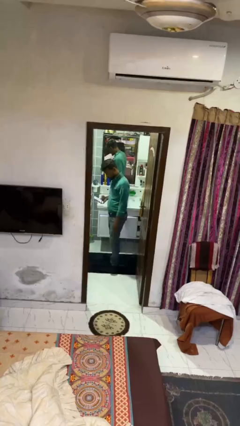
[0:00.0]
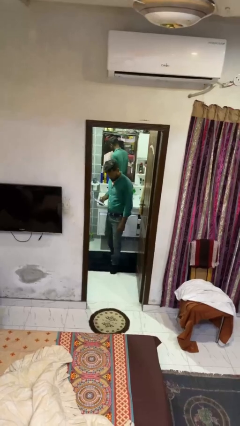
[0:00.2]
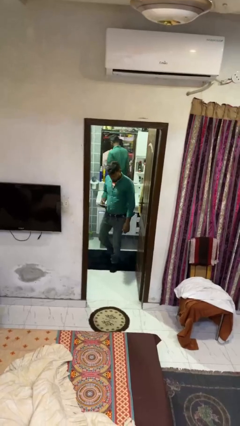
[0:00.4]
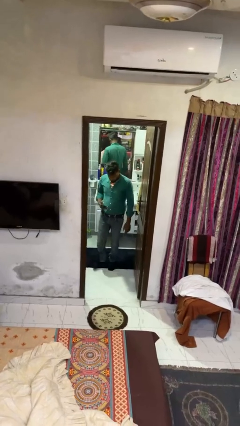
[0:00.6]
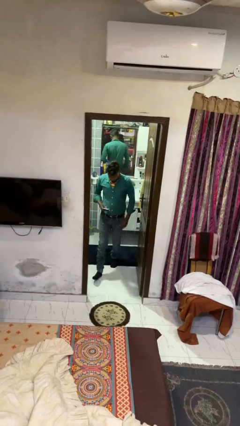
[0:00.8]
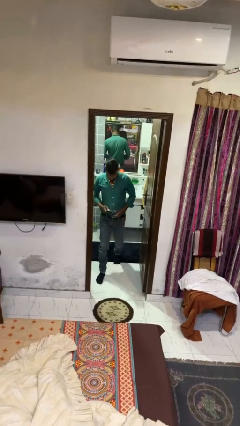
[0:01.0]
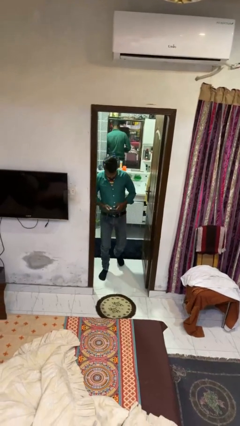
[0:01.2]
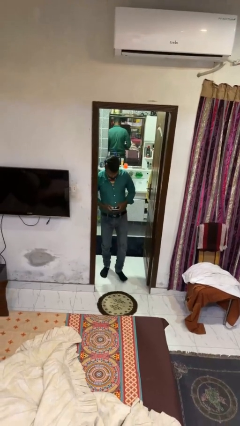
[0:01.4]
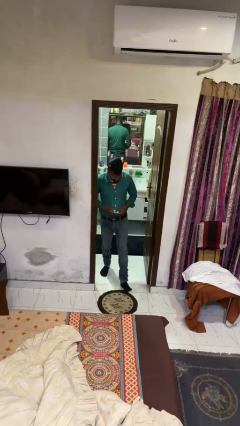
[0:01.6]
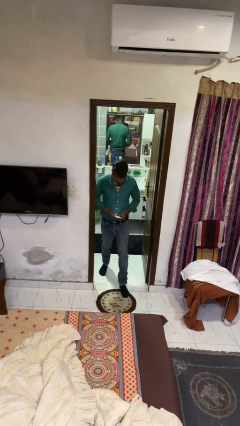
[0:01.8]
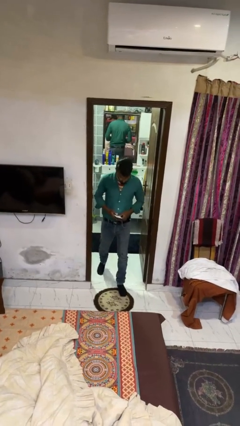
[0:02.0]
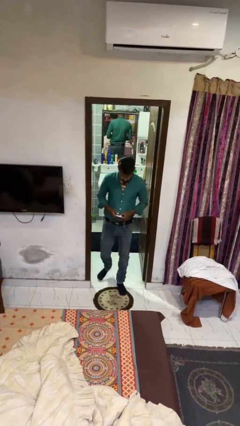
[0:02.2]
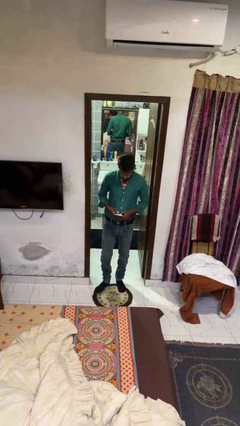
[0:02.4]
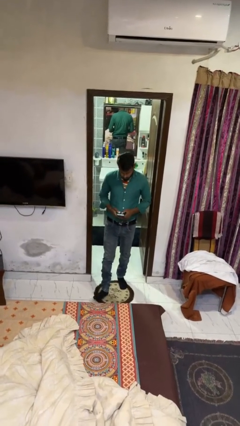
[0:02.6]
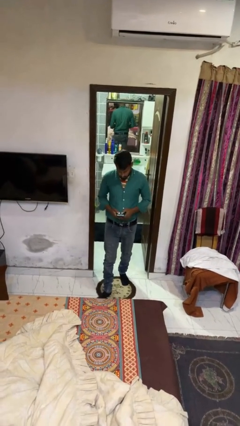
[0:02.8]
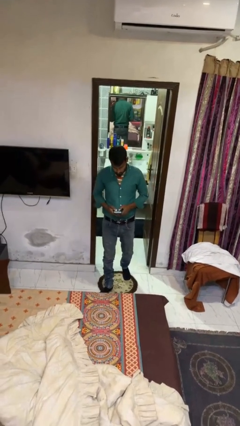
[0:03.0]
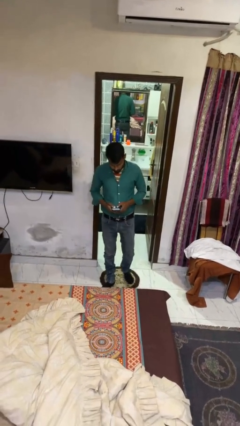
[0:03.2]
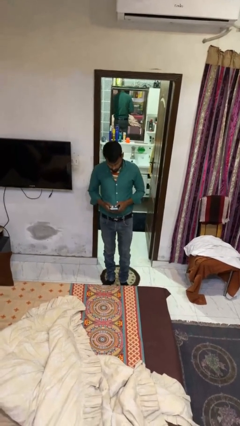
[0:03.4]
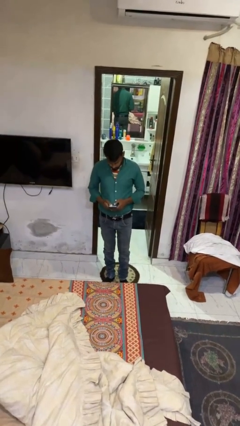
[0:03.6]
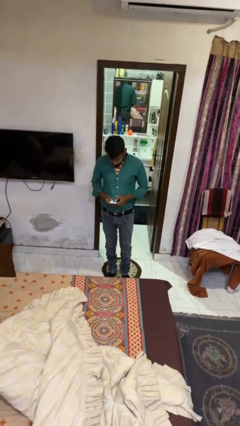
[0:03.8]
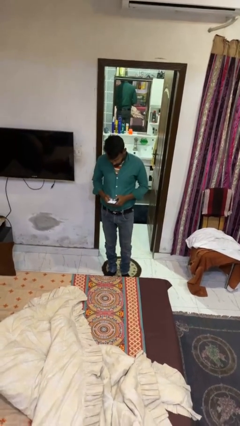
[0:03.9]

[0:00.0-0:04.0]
person enters scene through structure

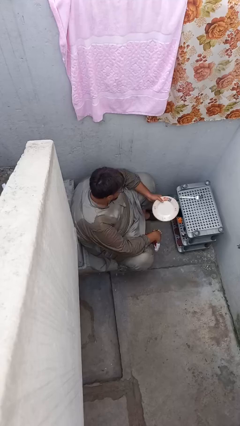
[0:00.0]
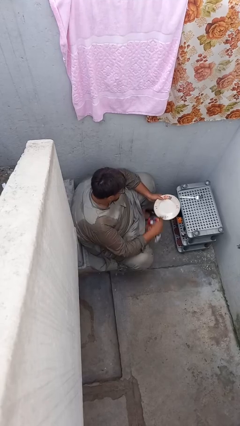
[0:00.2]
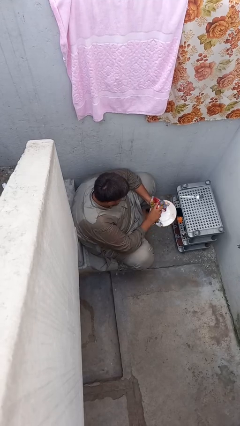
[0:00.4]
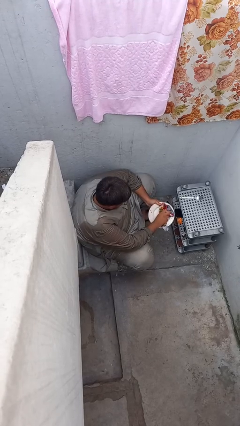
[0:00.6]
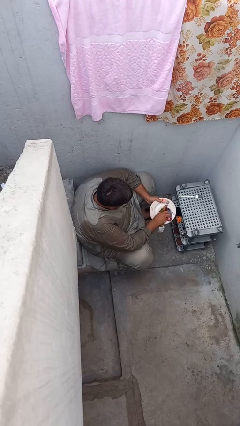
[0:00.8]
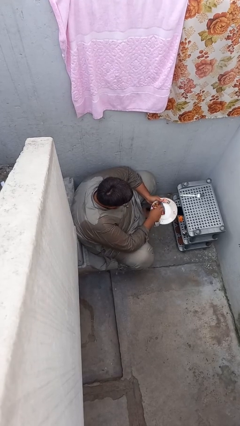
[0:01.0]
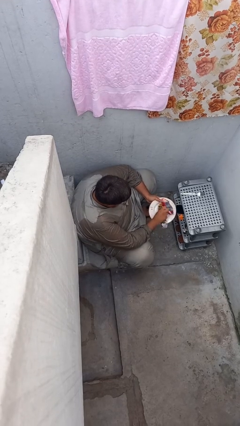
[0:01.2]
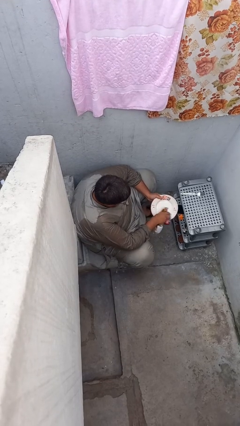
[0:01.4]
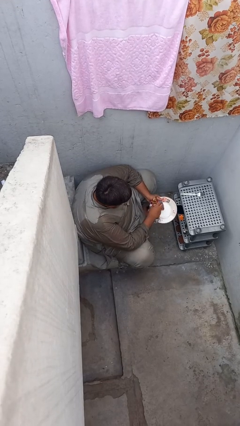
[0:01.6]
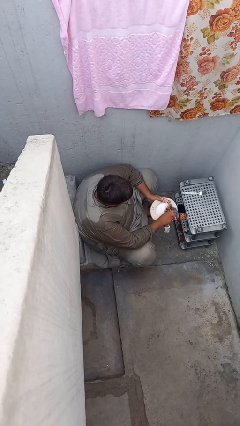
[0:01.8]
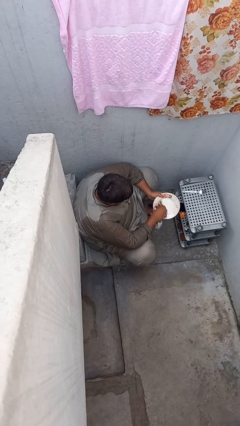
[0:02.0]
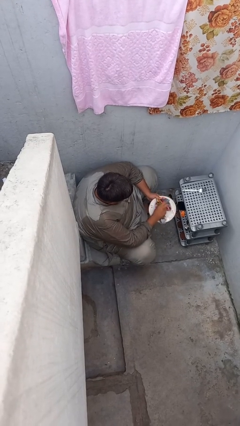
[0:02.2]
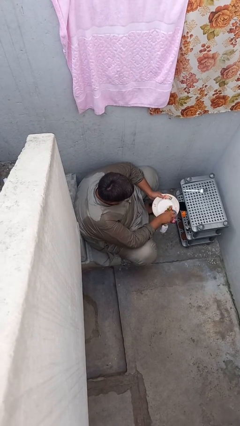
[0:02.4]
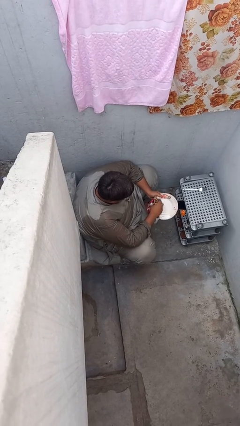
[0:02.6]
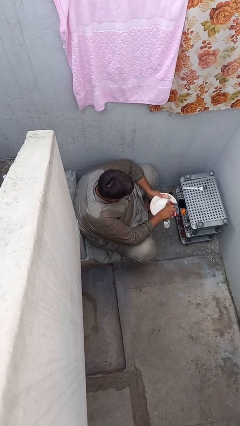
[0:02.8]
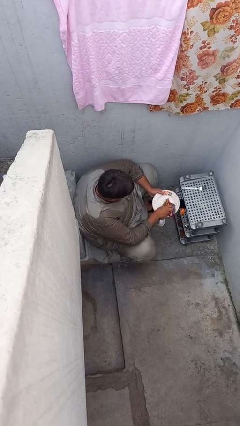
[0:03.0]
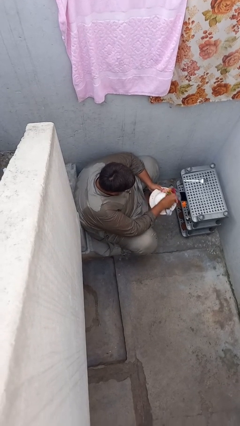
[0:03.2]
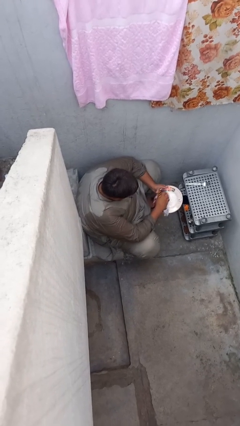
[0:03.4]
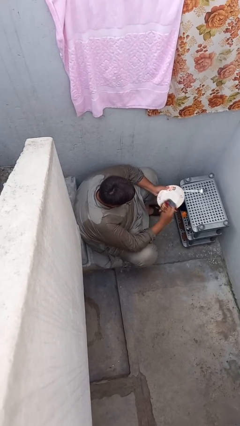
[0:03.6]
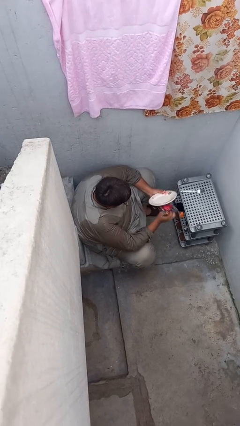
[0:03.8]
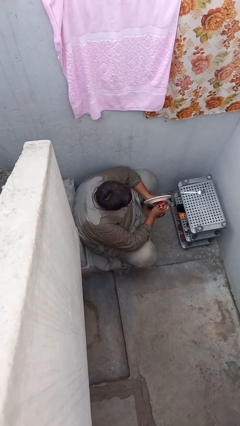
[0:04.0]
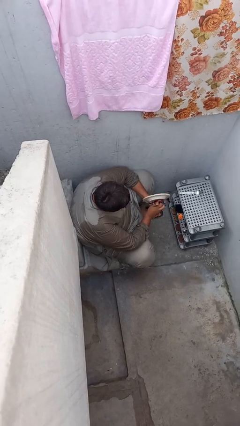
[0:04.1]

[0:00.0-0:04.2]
person dries dish

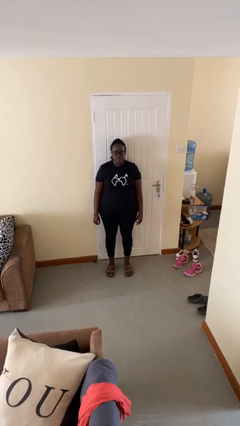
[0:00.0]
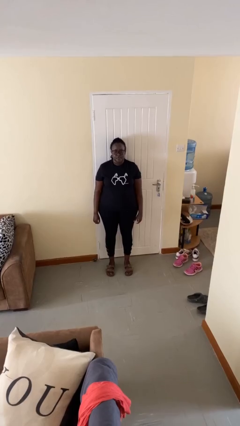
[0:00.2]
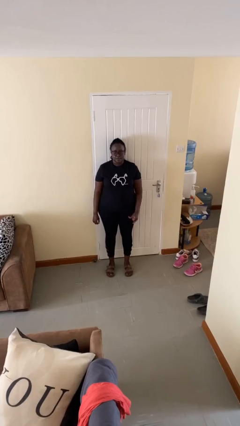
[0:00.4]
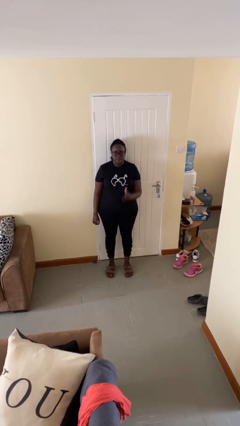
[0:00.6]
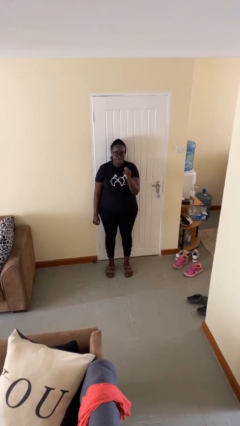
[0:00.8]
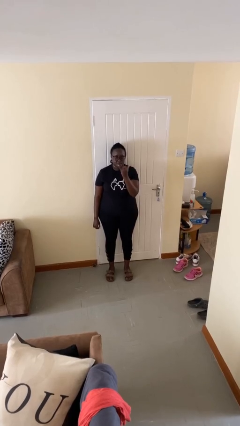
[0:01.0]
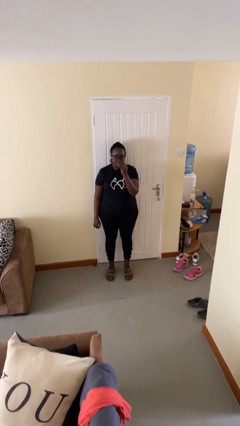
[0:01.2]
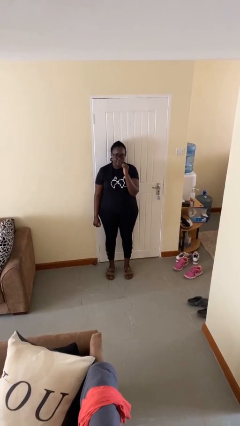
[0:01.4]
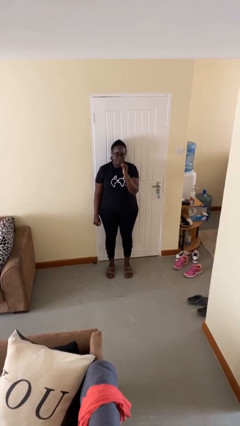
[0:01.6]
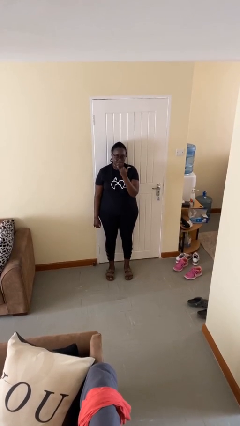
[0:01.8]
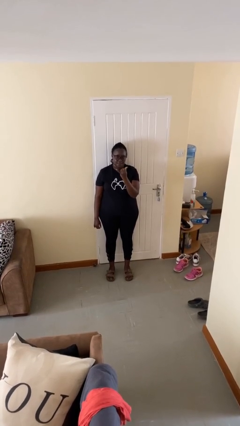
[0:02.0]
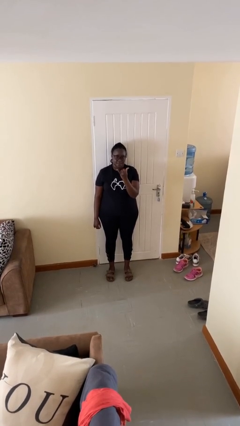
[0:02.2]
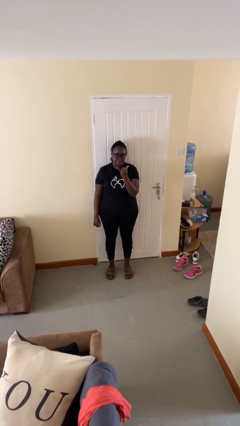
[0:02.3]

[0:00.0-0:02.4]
person gestures hang loose

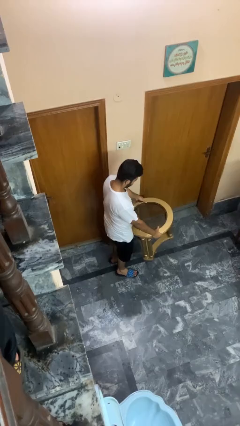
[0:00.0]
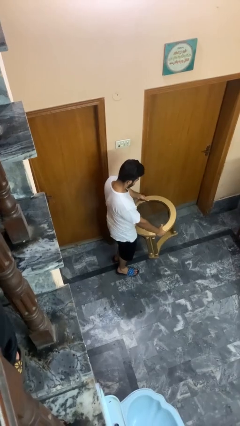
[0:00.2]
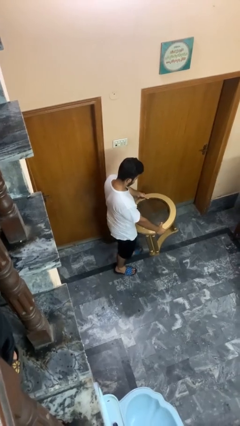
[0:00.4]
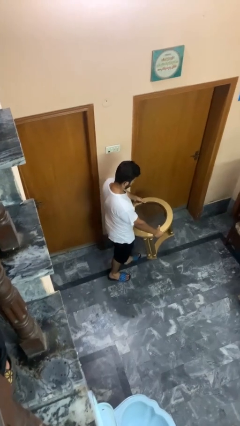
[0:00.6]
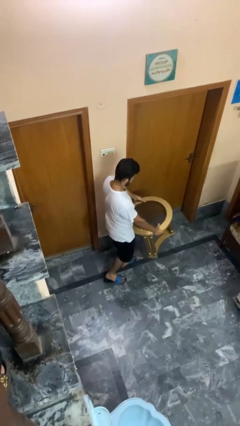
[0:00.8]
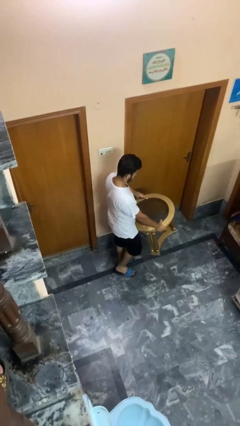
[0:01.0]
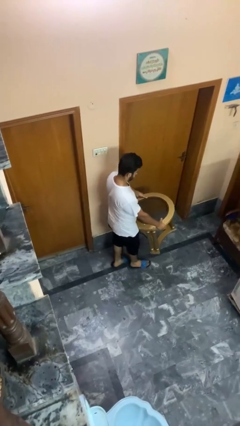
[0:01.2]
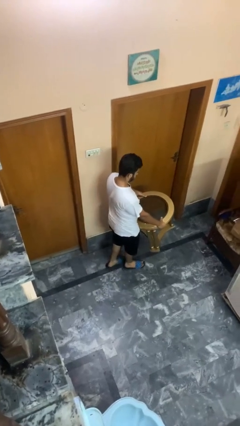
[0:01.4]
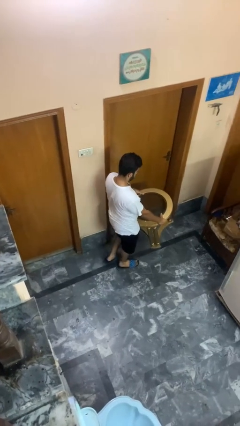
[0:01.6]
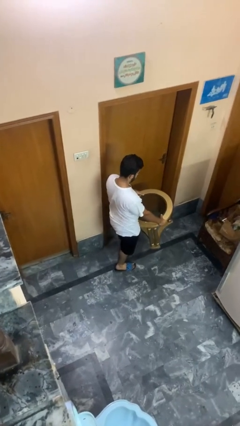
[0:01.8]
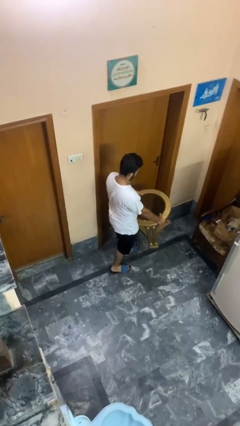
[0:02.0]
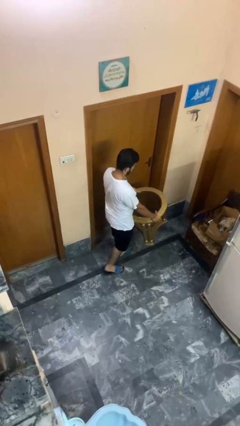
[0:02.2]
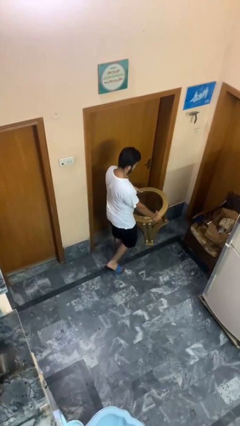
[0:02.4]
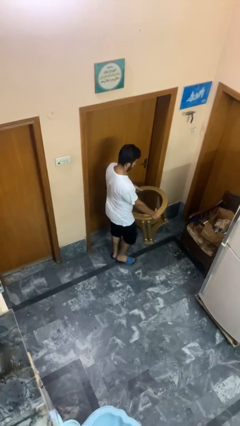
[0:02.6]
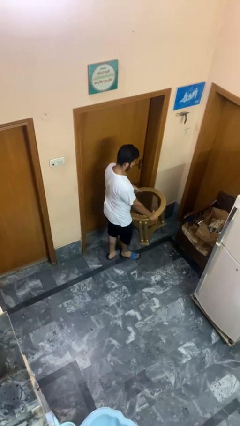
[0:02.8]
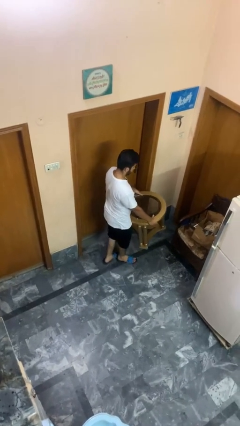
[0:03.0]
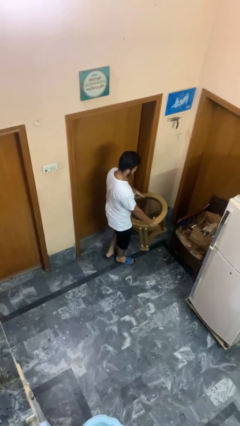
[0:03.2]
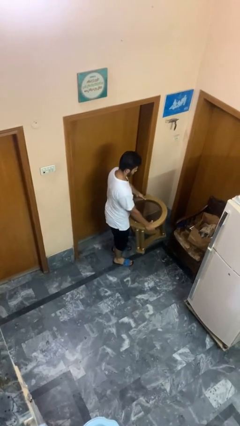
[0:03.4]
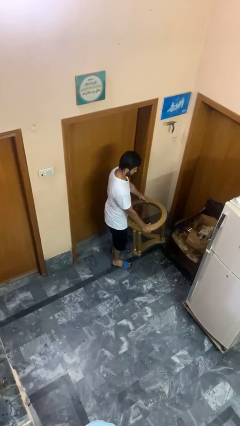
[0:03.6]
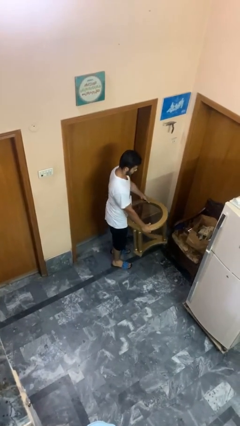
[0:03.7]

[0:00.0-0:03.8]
person carries furniture

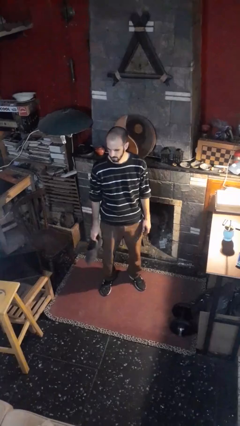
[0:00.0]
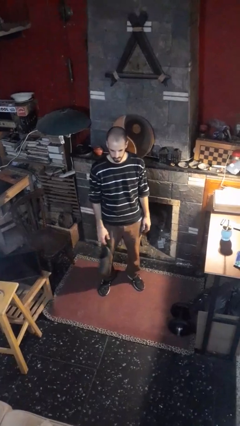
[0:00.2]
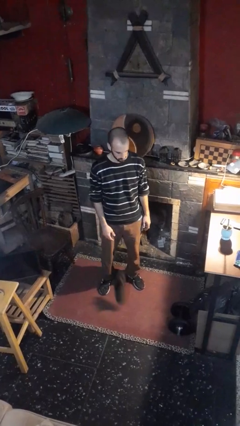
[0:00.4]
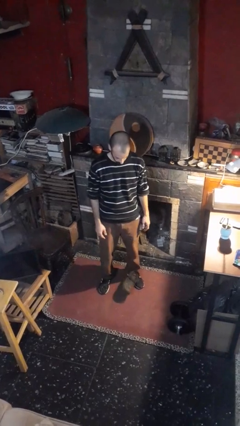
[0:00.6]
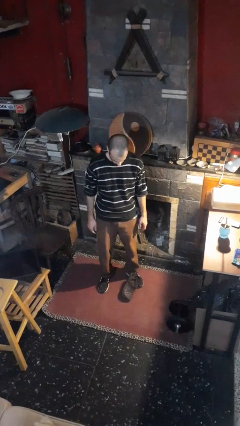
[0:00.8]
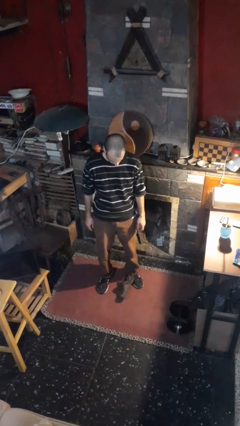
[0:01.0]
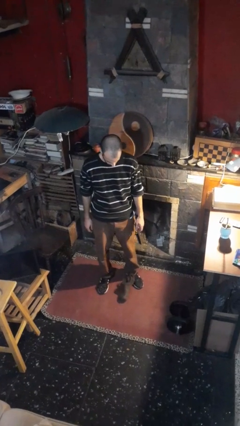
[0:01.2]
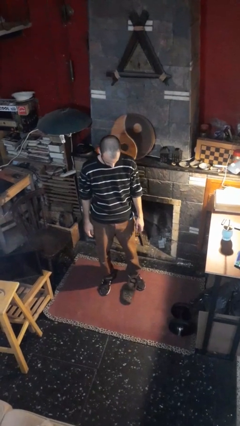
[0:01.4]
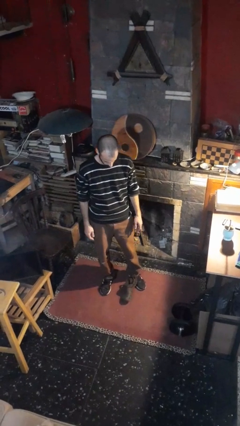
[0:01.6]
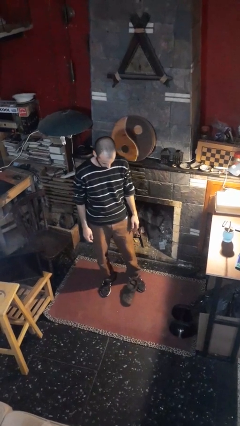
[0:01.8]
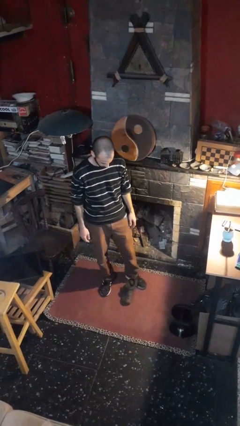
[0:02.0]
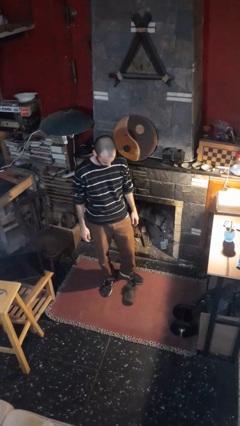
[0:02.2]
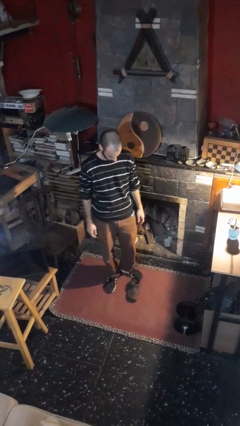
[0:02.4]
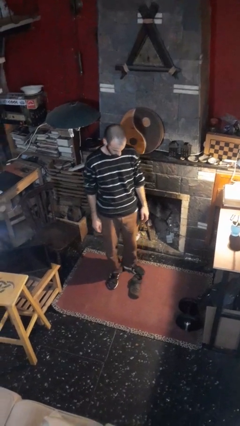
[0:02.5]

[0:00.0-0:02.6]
person drops object

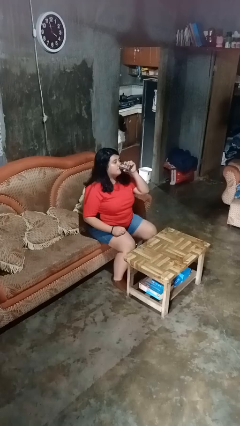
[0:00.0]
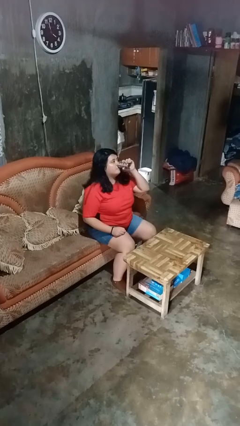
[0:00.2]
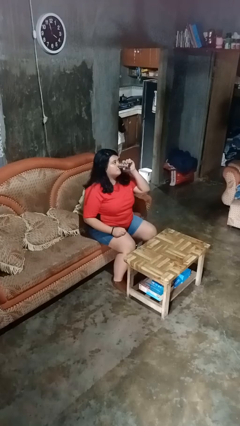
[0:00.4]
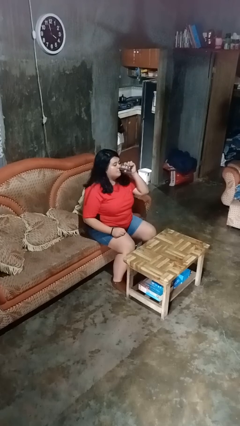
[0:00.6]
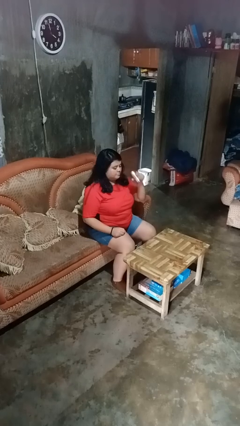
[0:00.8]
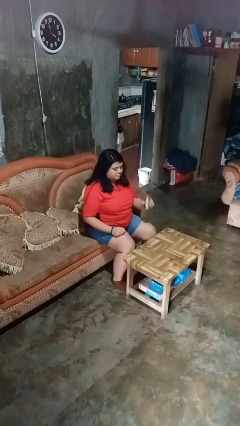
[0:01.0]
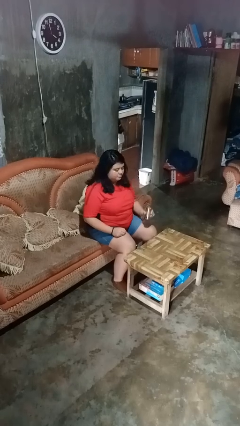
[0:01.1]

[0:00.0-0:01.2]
person drinks from beverage can
